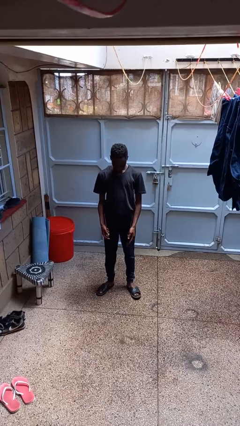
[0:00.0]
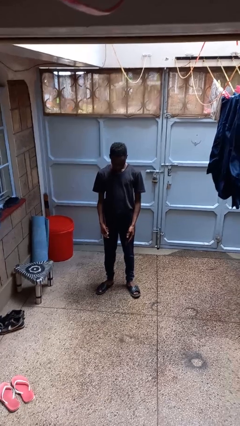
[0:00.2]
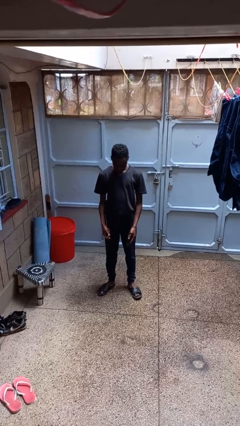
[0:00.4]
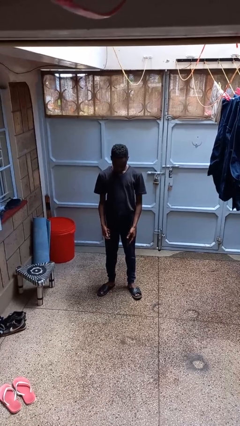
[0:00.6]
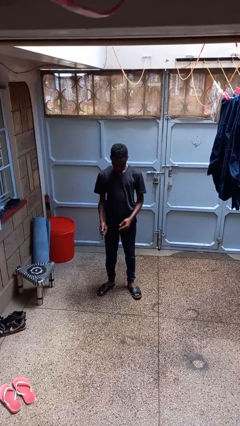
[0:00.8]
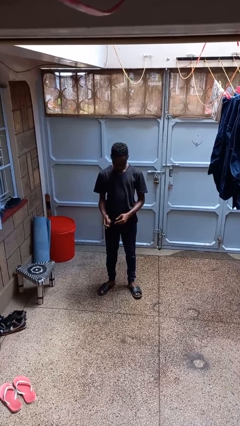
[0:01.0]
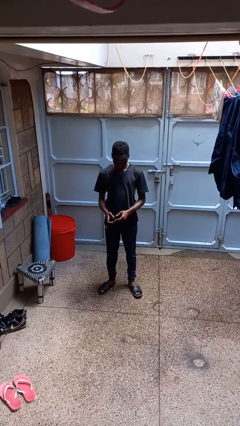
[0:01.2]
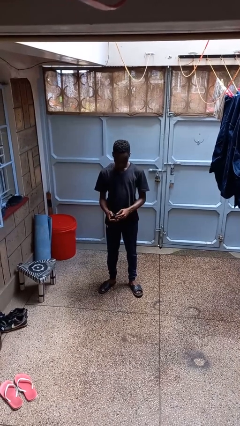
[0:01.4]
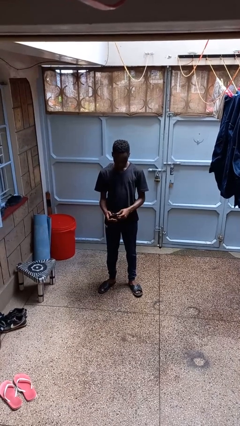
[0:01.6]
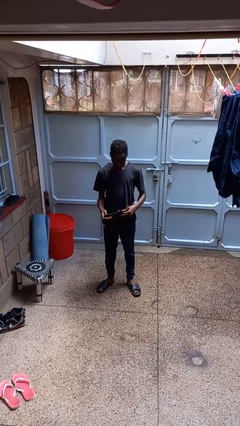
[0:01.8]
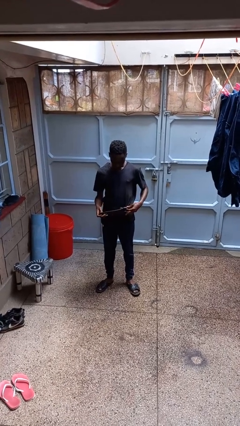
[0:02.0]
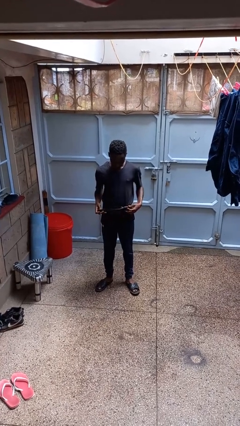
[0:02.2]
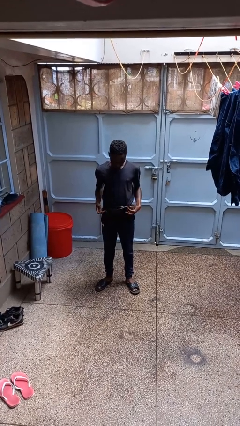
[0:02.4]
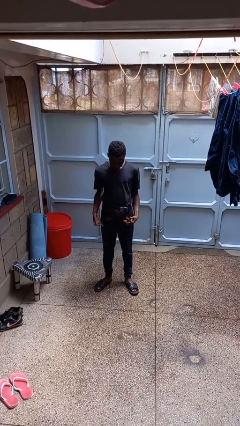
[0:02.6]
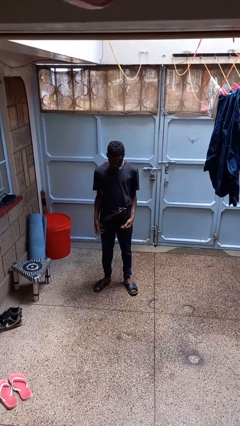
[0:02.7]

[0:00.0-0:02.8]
person puts on belt

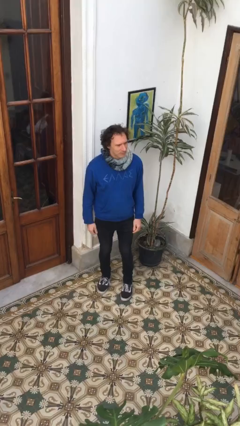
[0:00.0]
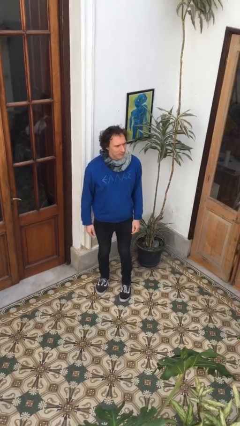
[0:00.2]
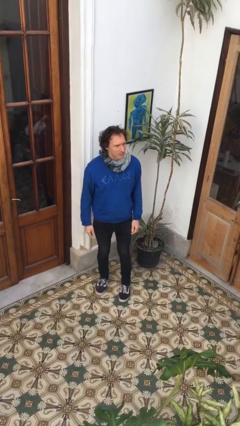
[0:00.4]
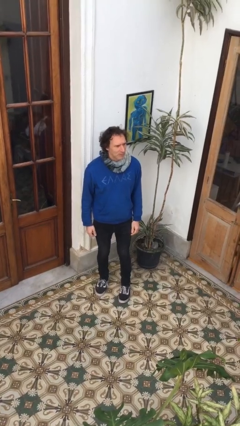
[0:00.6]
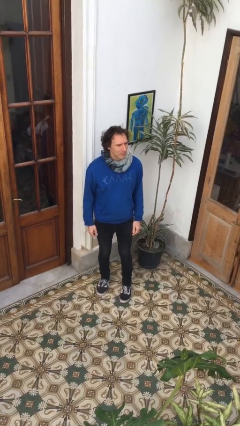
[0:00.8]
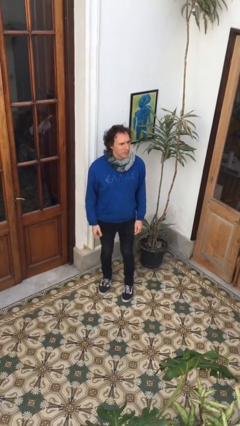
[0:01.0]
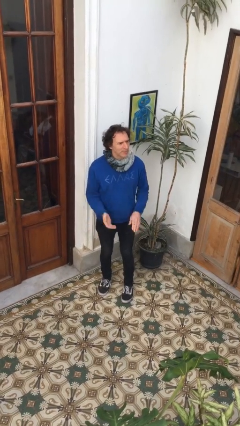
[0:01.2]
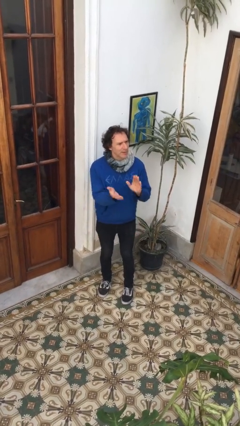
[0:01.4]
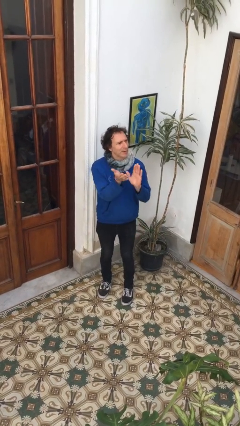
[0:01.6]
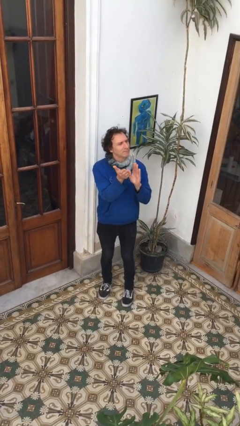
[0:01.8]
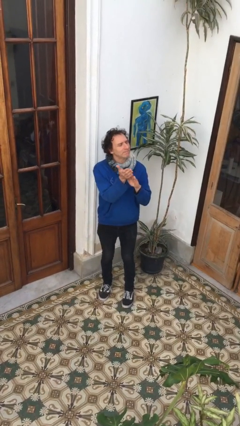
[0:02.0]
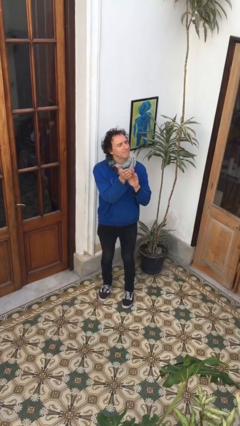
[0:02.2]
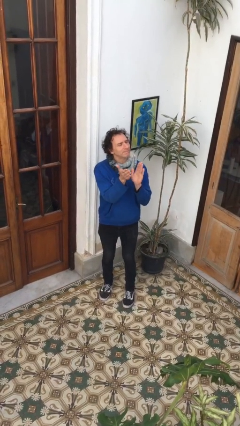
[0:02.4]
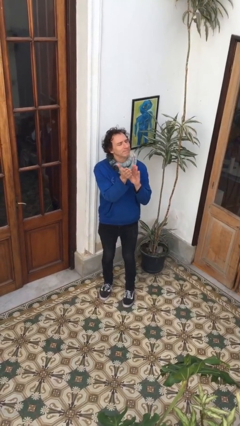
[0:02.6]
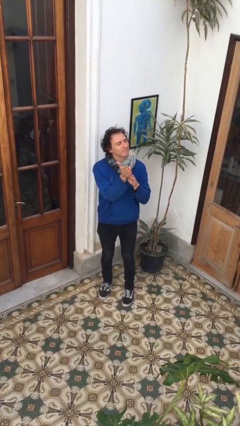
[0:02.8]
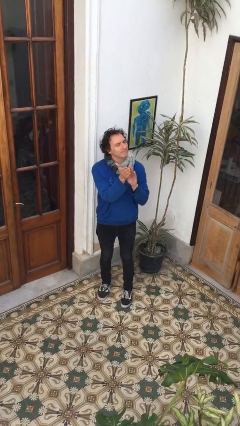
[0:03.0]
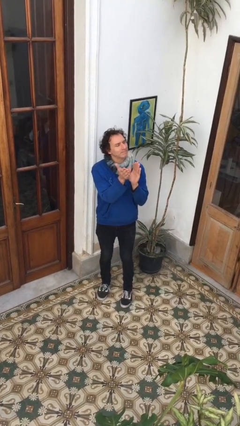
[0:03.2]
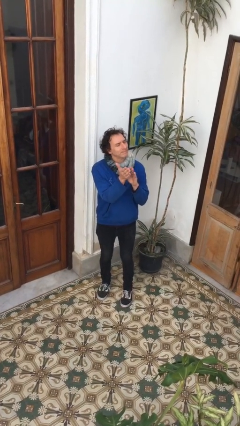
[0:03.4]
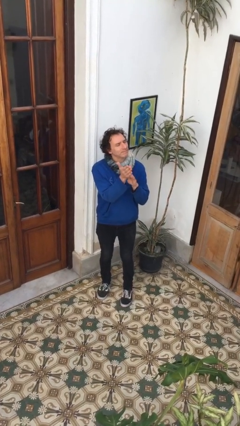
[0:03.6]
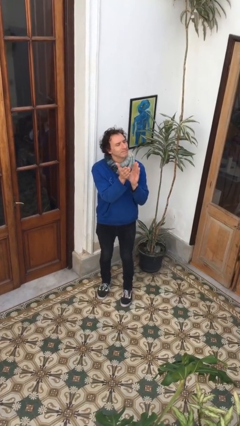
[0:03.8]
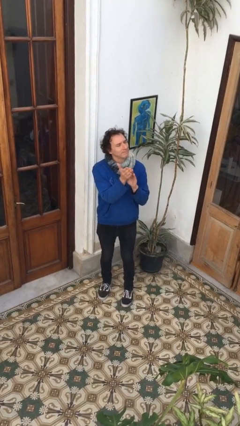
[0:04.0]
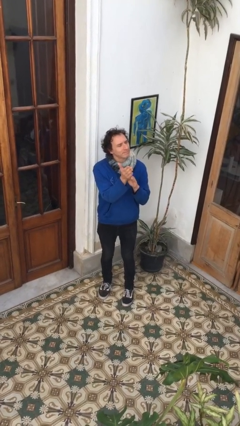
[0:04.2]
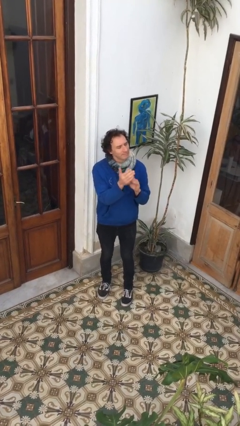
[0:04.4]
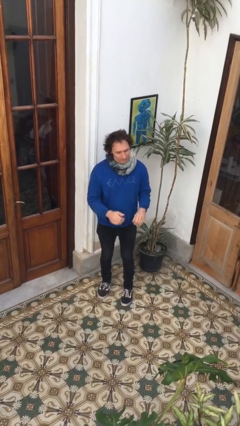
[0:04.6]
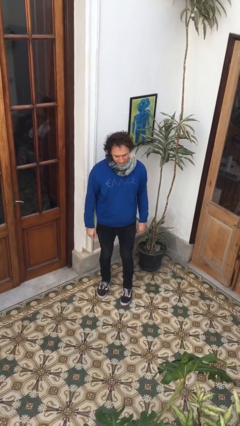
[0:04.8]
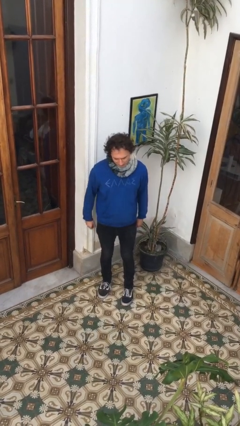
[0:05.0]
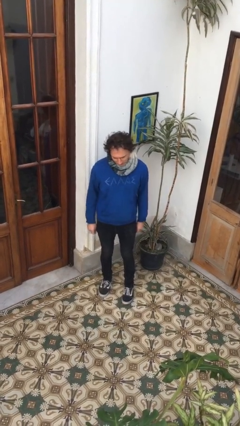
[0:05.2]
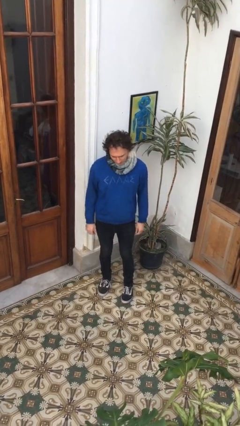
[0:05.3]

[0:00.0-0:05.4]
person claps hands

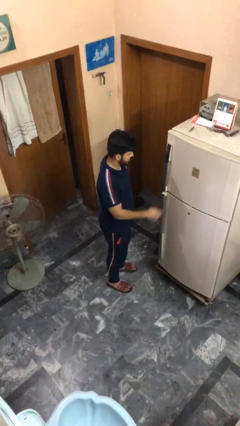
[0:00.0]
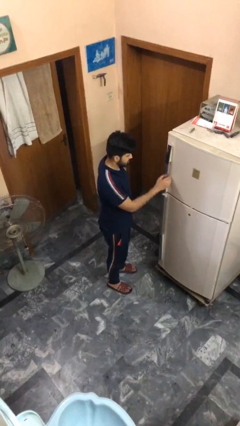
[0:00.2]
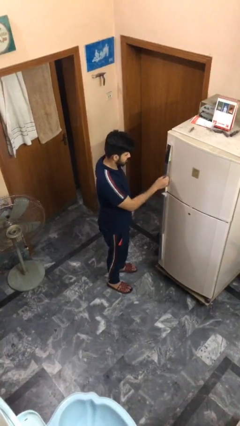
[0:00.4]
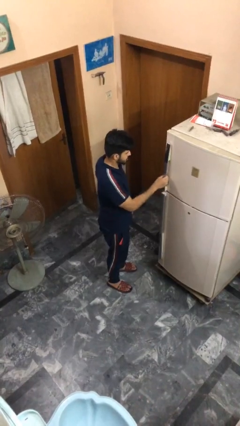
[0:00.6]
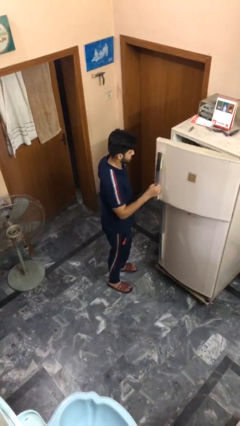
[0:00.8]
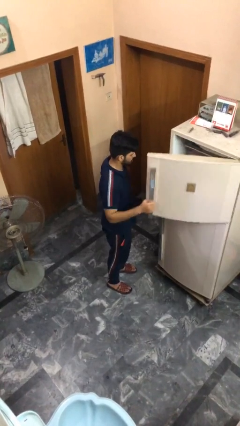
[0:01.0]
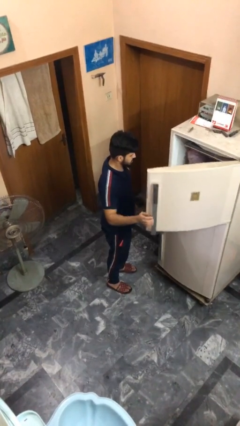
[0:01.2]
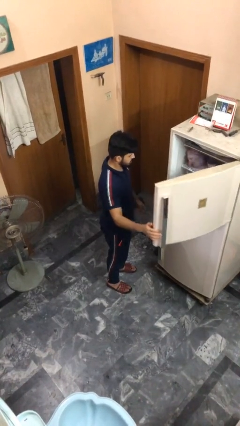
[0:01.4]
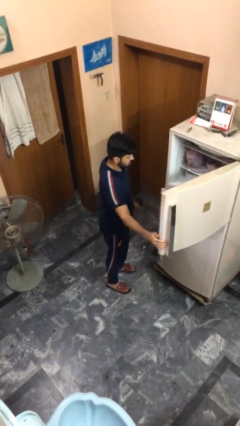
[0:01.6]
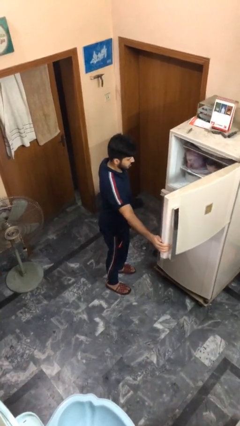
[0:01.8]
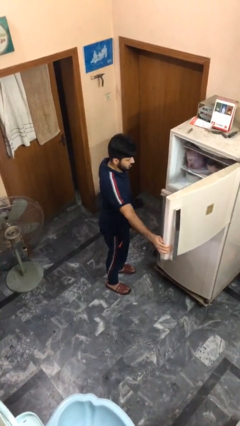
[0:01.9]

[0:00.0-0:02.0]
person opens refrigerator

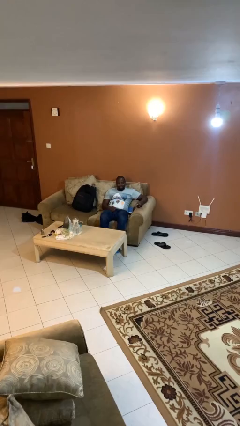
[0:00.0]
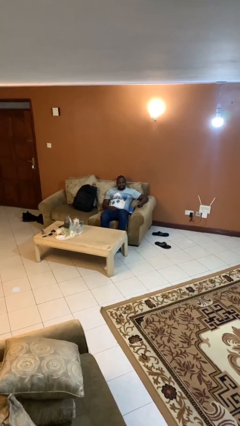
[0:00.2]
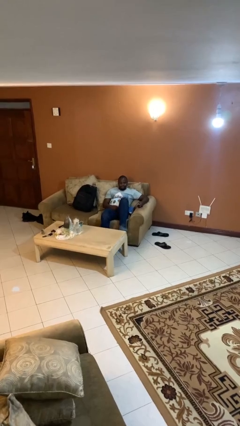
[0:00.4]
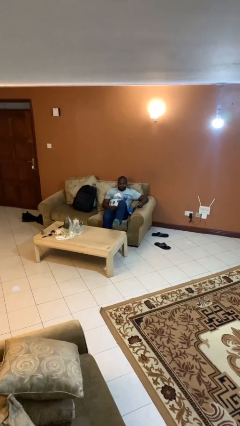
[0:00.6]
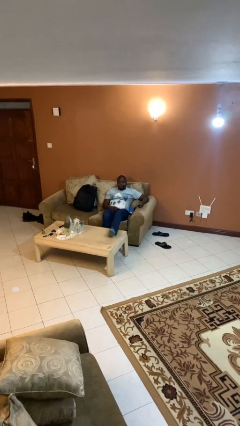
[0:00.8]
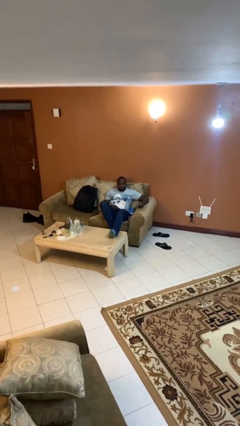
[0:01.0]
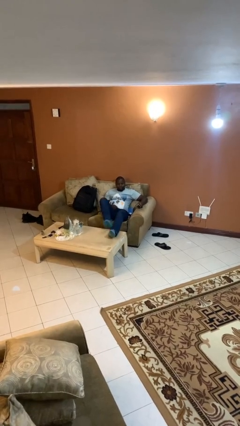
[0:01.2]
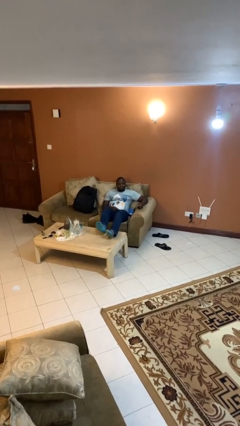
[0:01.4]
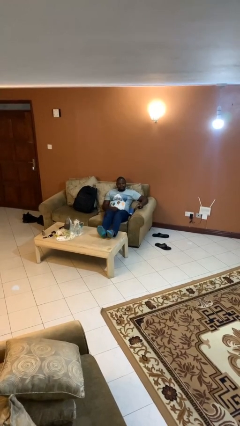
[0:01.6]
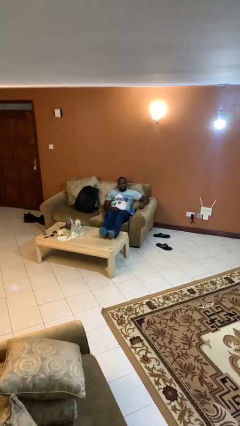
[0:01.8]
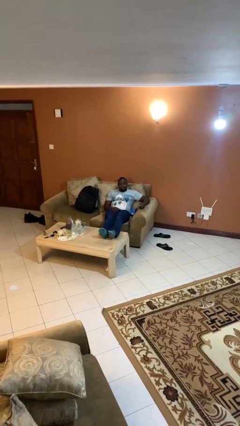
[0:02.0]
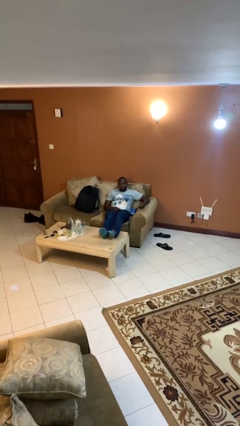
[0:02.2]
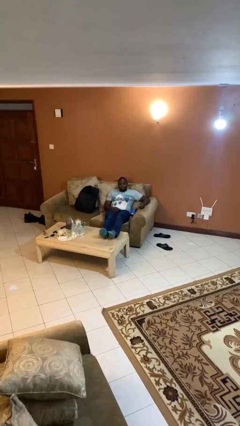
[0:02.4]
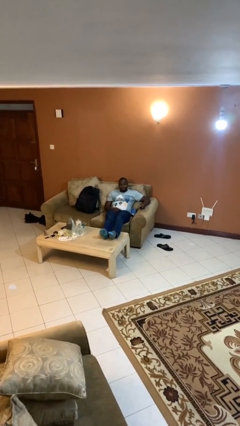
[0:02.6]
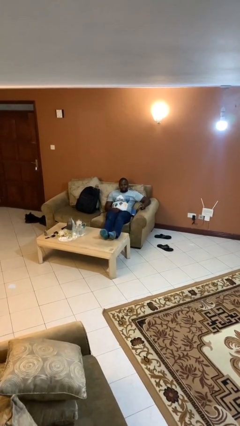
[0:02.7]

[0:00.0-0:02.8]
person puts feet up

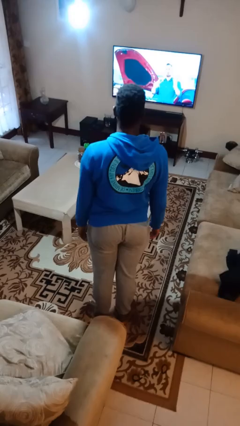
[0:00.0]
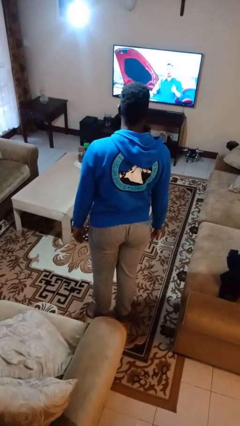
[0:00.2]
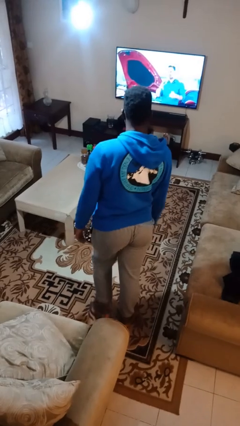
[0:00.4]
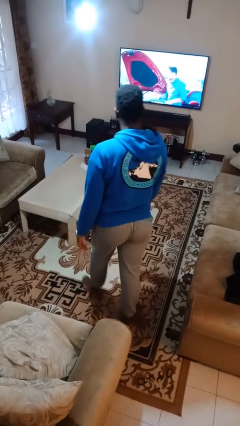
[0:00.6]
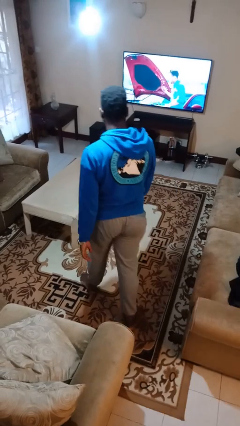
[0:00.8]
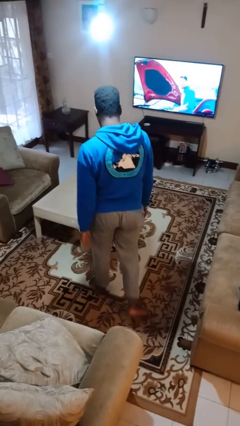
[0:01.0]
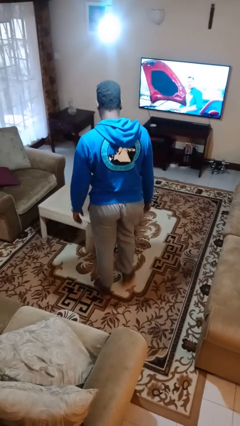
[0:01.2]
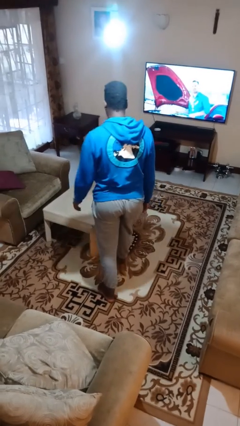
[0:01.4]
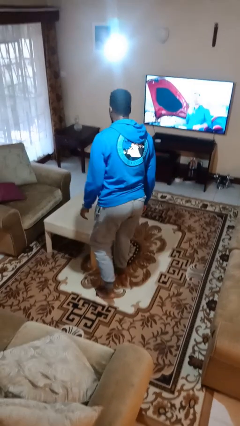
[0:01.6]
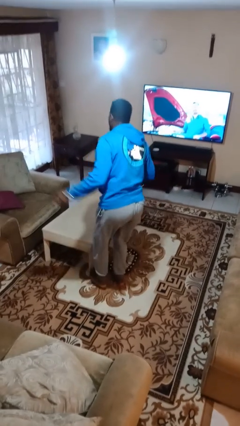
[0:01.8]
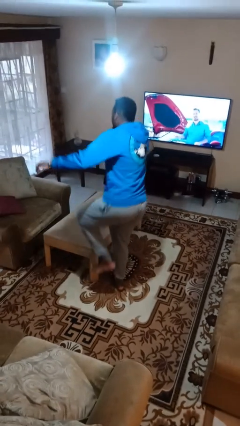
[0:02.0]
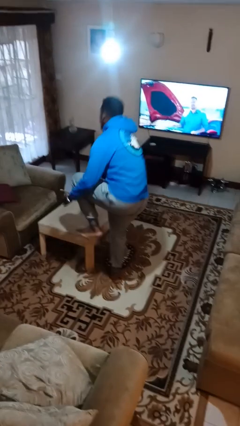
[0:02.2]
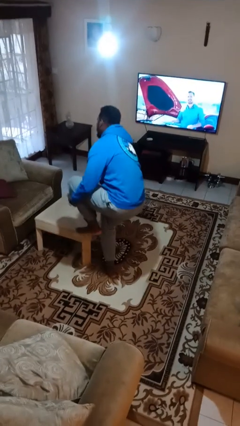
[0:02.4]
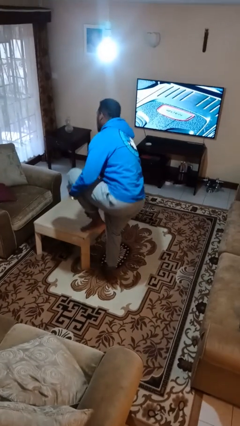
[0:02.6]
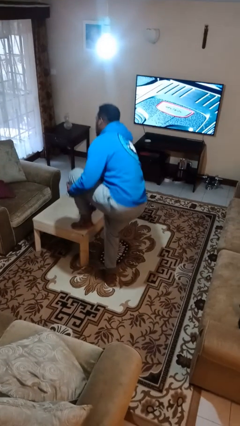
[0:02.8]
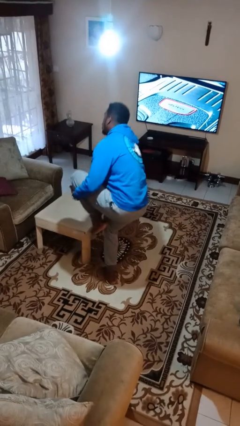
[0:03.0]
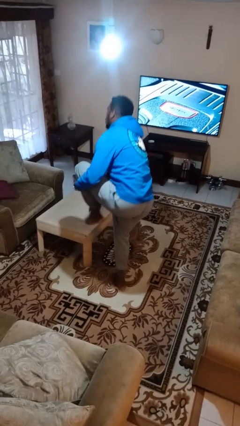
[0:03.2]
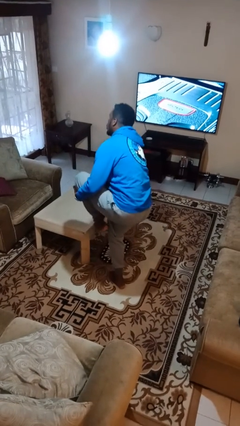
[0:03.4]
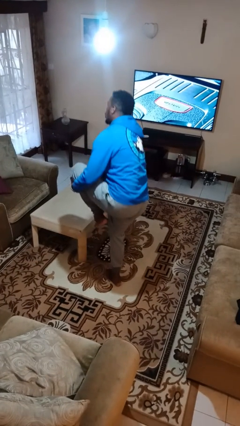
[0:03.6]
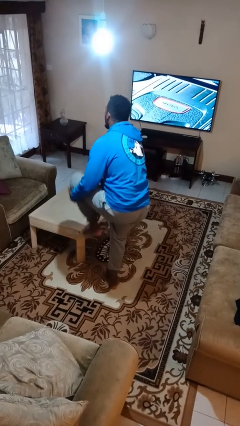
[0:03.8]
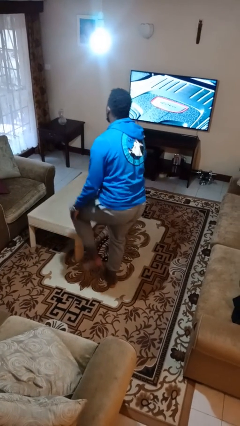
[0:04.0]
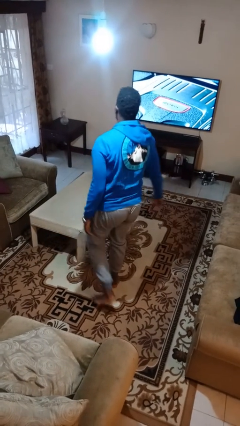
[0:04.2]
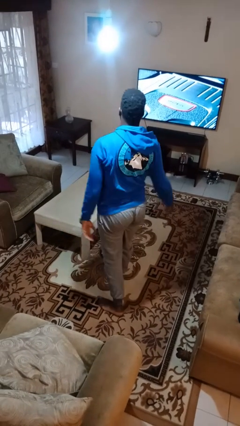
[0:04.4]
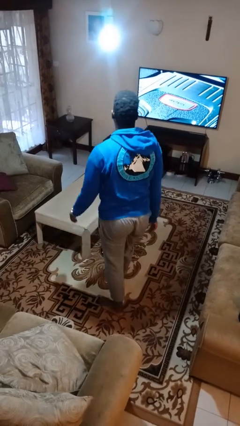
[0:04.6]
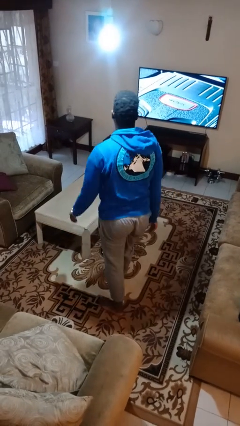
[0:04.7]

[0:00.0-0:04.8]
person stubs toe

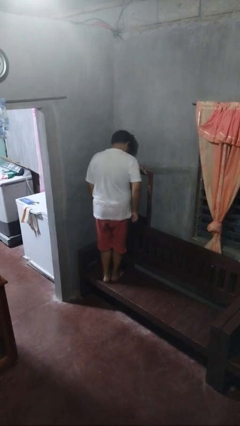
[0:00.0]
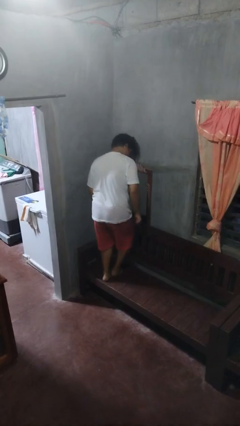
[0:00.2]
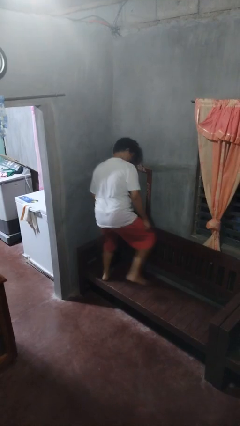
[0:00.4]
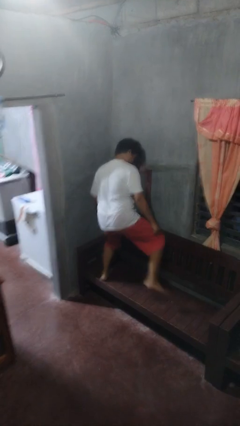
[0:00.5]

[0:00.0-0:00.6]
person jumps on couch
